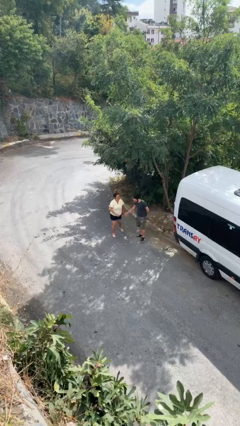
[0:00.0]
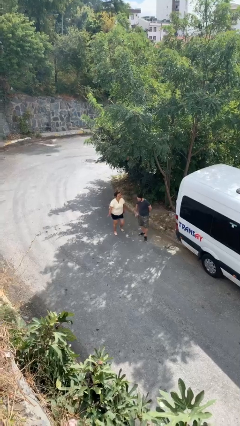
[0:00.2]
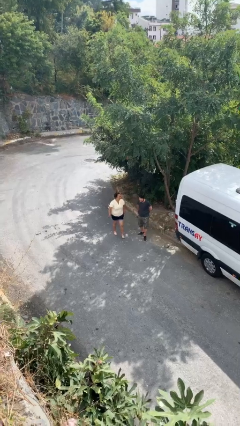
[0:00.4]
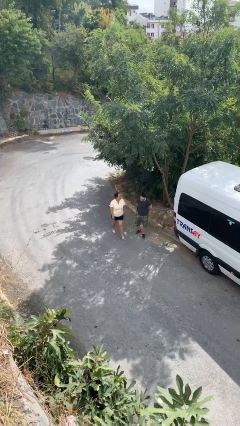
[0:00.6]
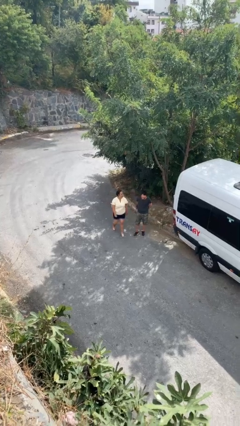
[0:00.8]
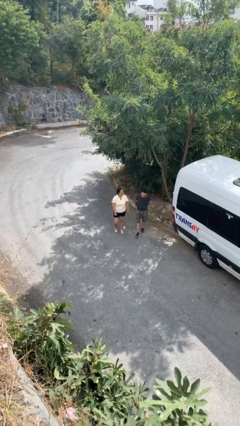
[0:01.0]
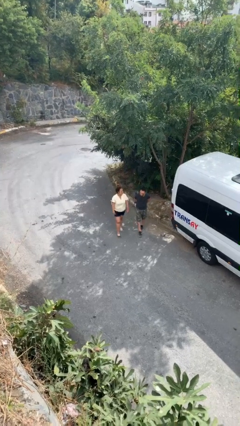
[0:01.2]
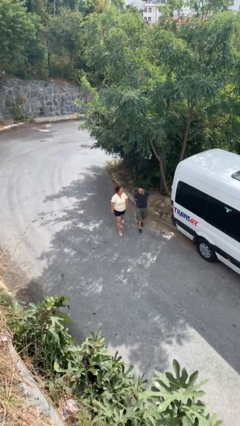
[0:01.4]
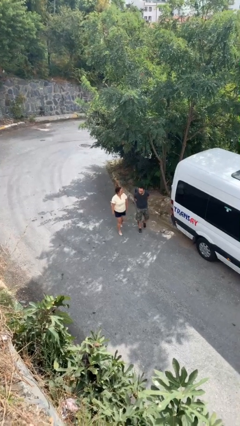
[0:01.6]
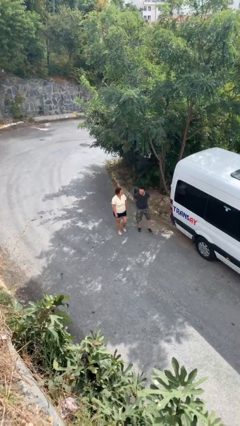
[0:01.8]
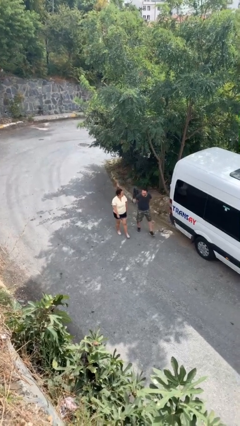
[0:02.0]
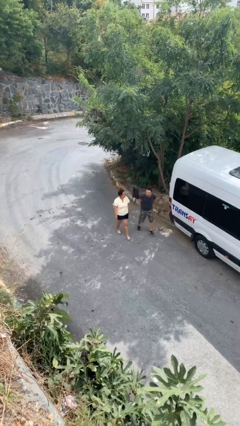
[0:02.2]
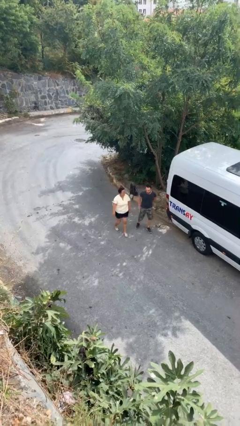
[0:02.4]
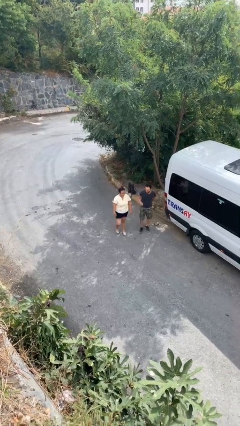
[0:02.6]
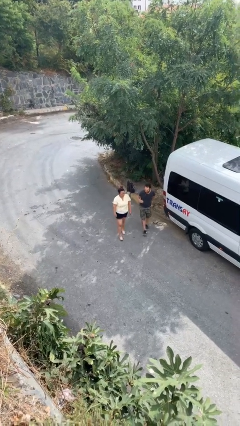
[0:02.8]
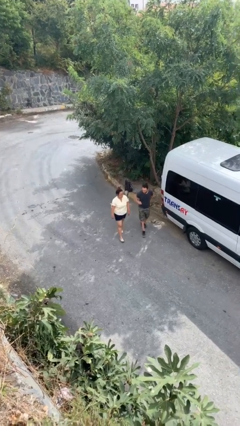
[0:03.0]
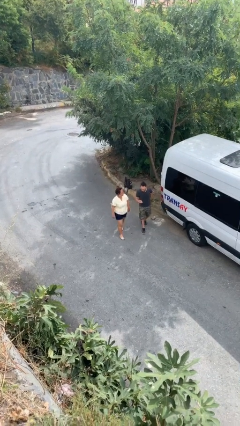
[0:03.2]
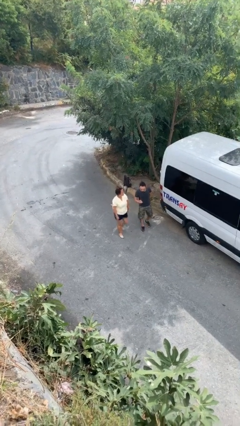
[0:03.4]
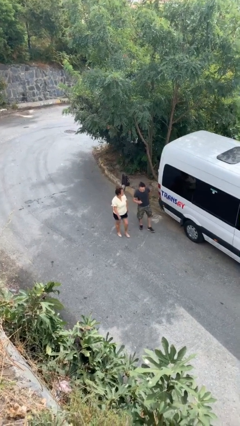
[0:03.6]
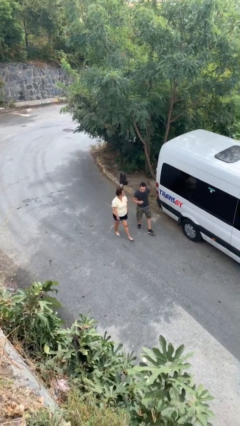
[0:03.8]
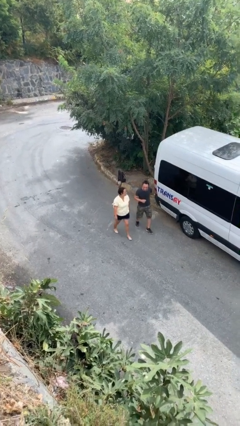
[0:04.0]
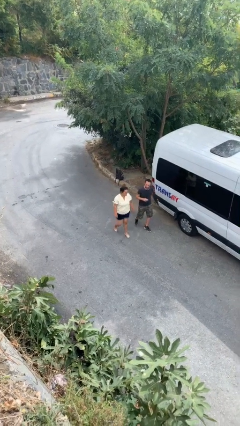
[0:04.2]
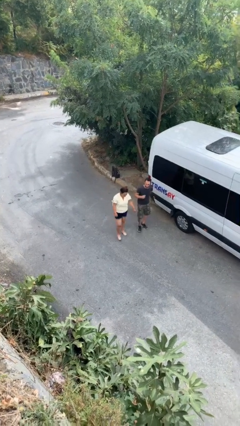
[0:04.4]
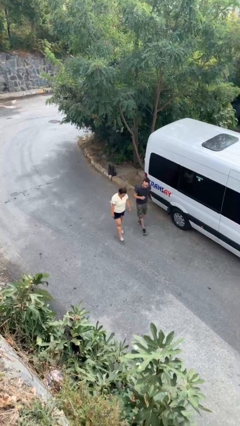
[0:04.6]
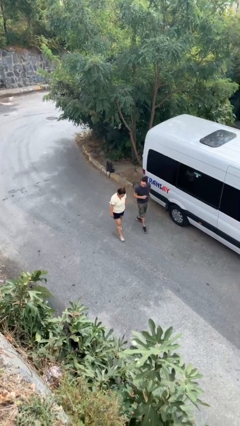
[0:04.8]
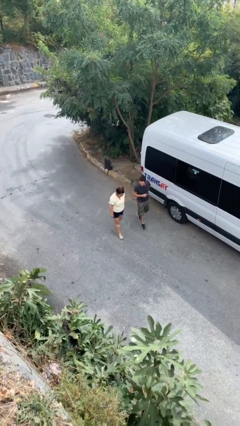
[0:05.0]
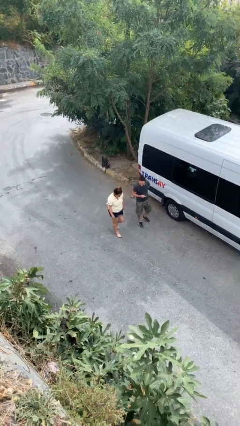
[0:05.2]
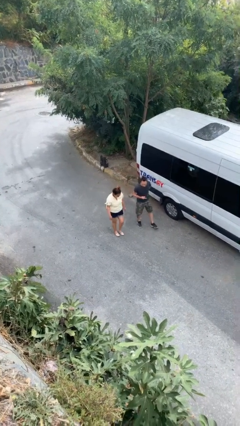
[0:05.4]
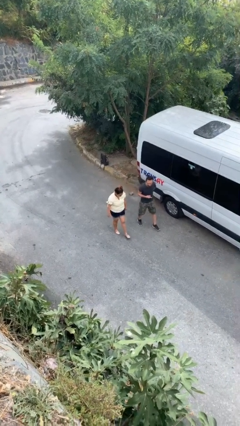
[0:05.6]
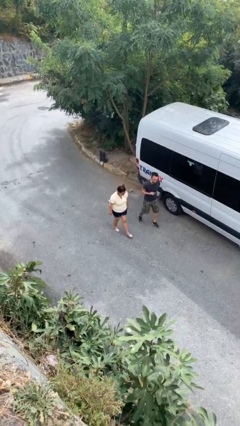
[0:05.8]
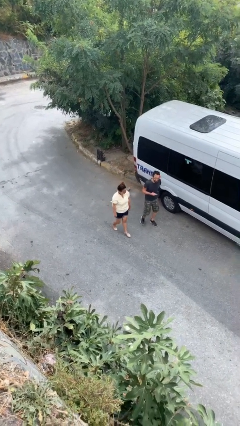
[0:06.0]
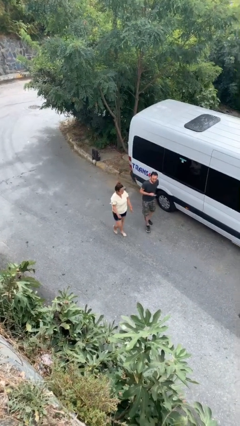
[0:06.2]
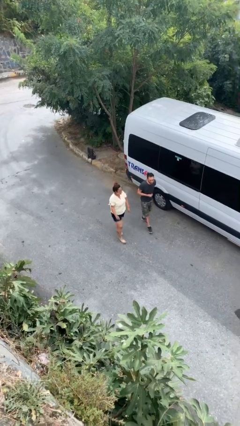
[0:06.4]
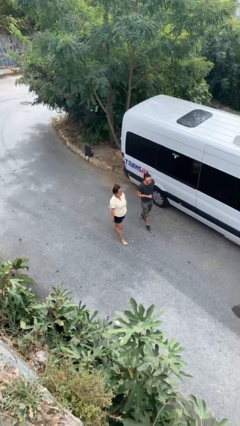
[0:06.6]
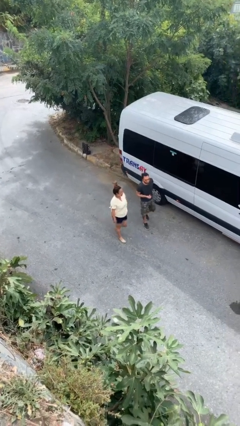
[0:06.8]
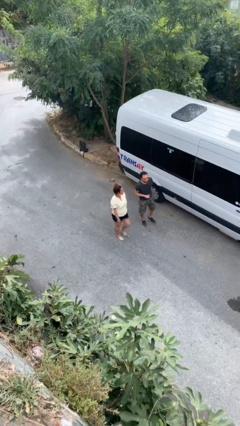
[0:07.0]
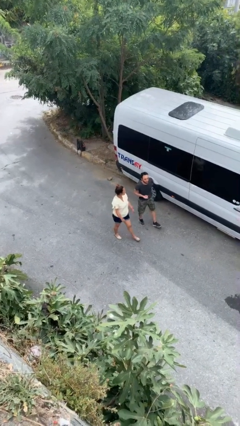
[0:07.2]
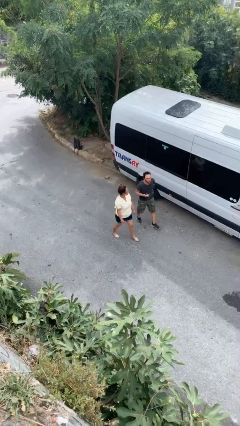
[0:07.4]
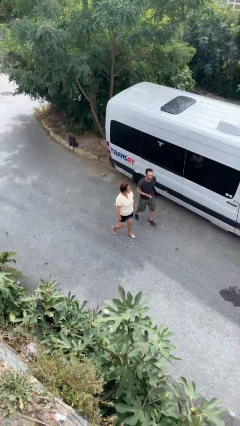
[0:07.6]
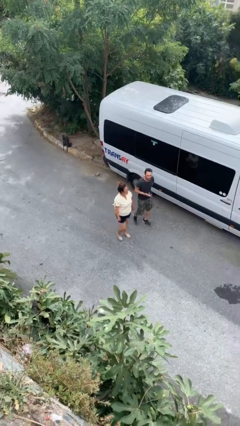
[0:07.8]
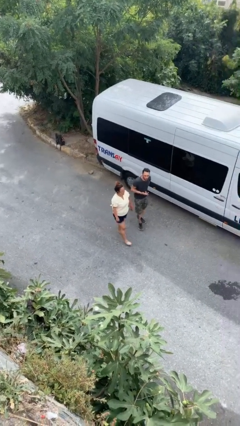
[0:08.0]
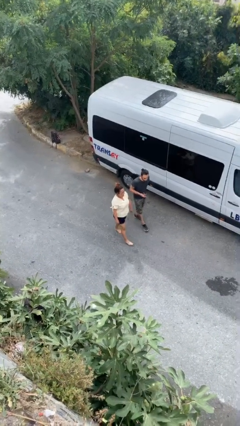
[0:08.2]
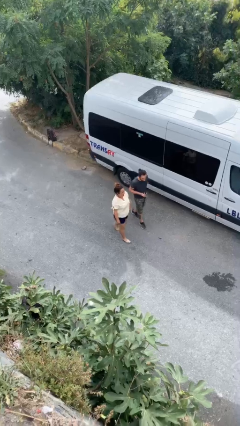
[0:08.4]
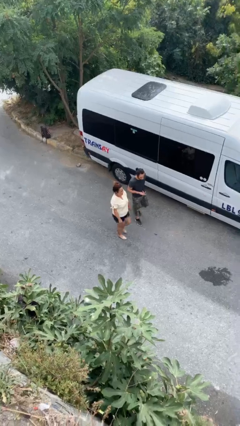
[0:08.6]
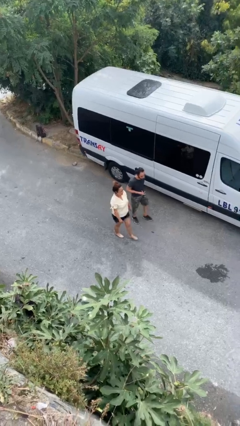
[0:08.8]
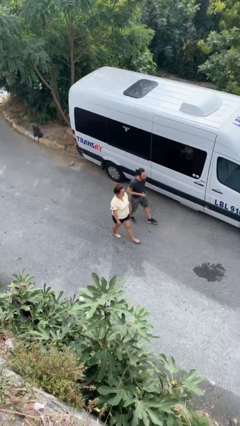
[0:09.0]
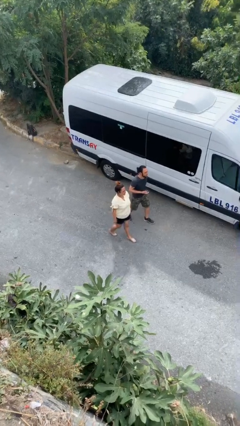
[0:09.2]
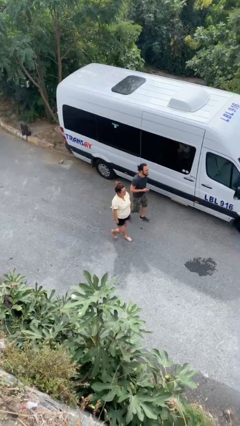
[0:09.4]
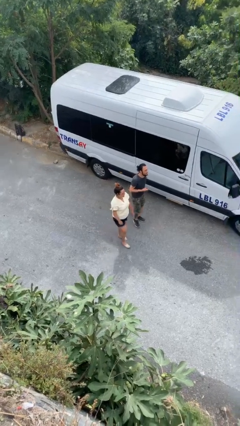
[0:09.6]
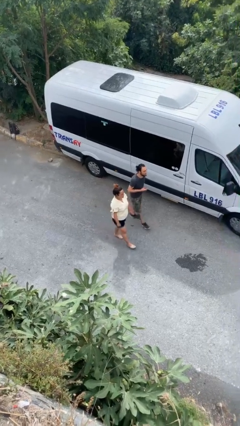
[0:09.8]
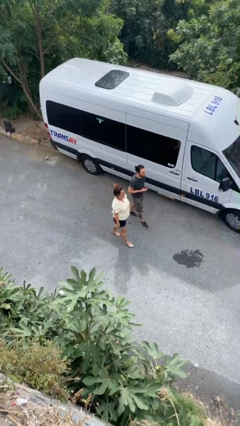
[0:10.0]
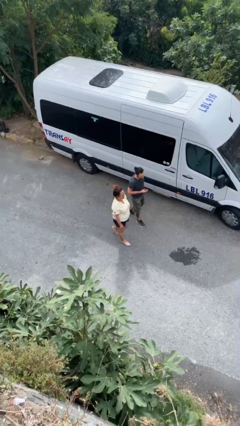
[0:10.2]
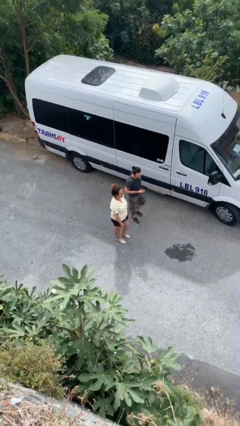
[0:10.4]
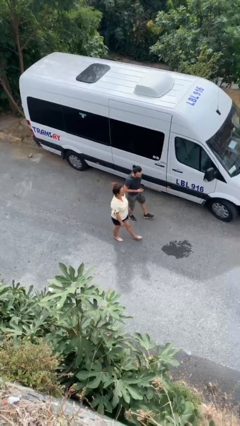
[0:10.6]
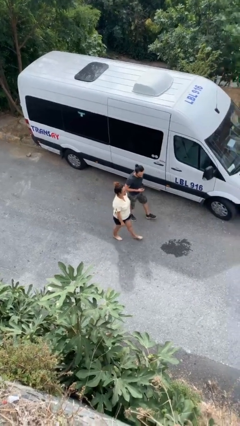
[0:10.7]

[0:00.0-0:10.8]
person talks to person

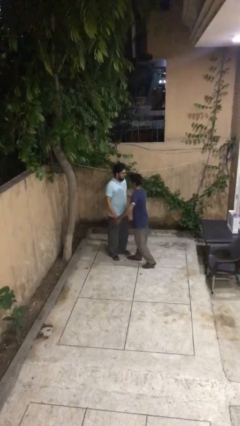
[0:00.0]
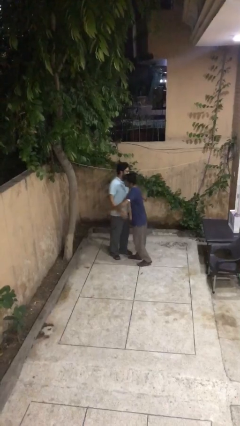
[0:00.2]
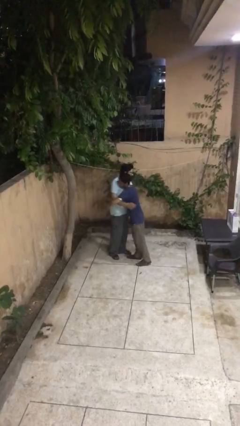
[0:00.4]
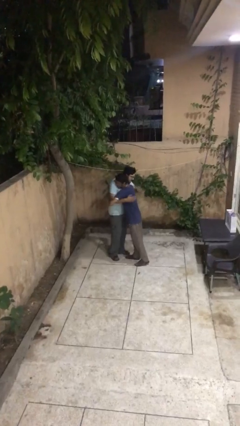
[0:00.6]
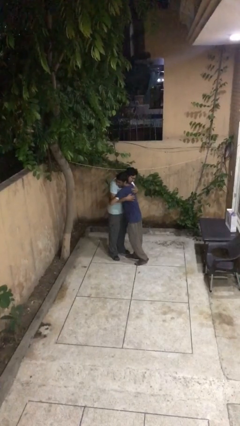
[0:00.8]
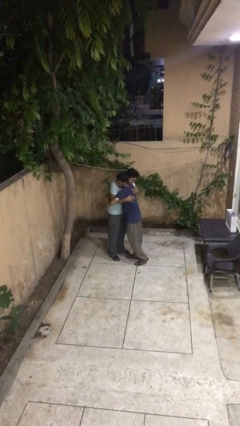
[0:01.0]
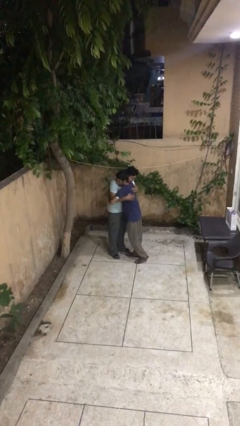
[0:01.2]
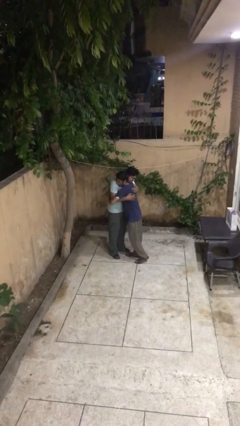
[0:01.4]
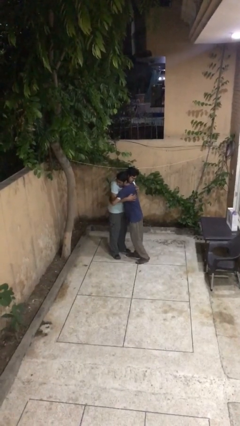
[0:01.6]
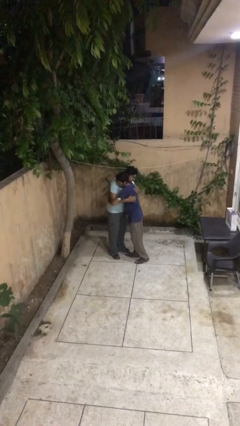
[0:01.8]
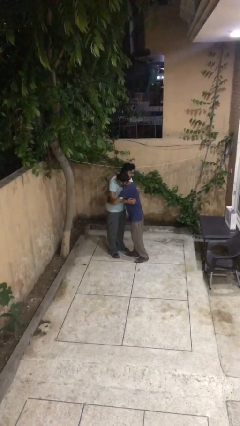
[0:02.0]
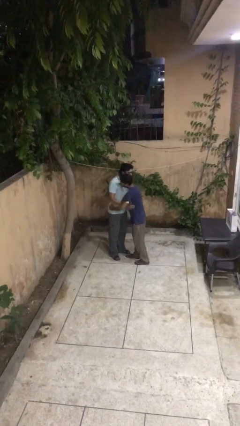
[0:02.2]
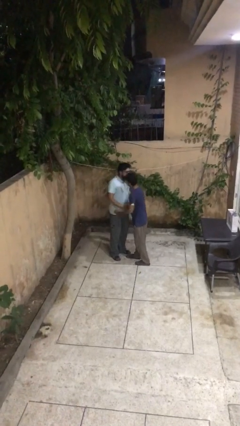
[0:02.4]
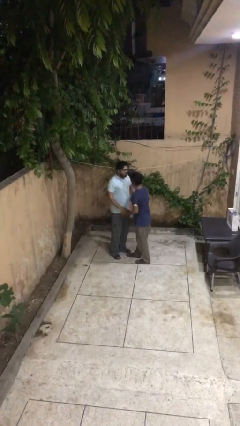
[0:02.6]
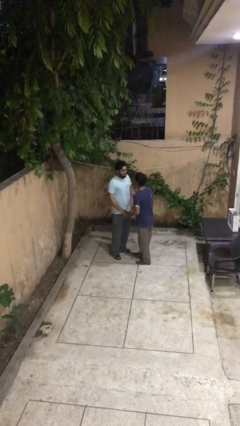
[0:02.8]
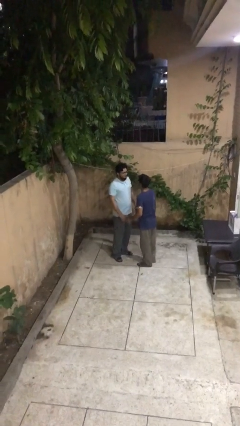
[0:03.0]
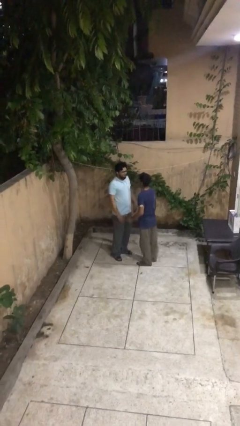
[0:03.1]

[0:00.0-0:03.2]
person embraces person

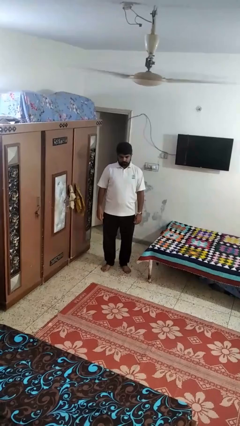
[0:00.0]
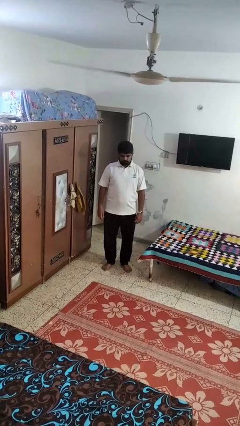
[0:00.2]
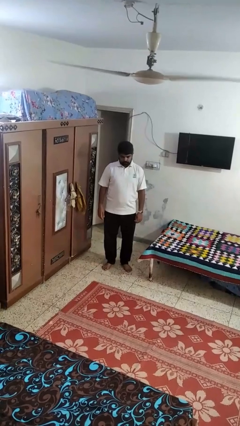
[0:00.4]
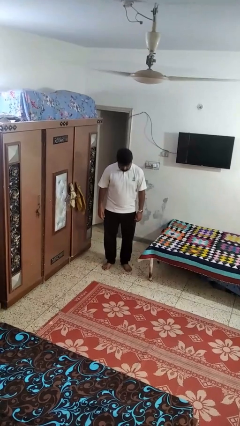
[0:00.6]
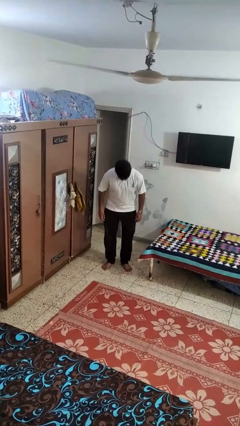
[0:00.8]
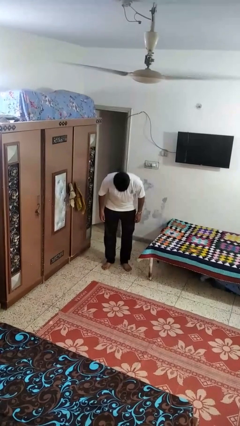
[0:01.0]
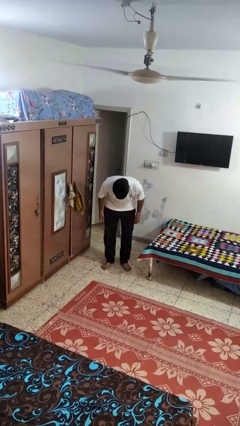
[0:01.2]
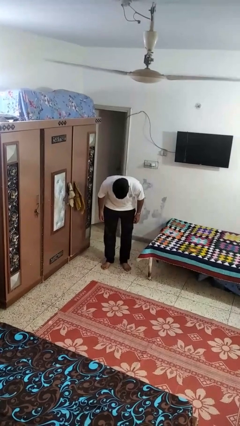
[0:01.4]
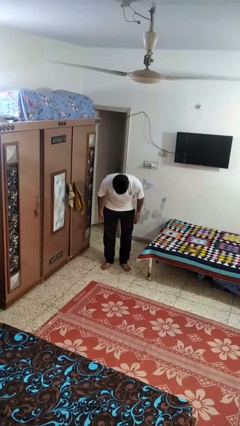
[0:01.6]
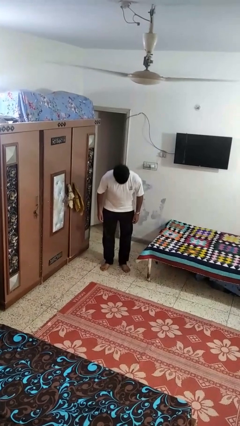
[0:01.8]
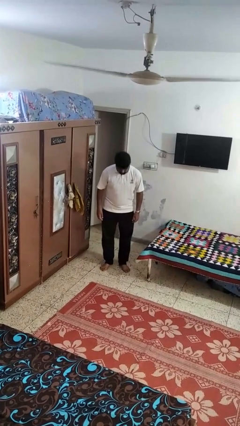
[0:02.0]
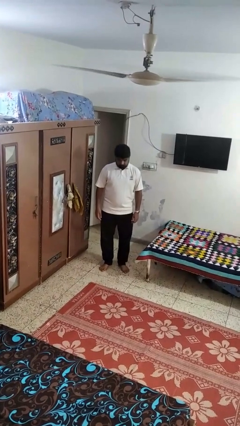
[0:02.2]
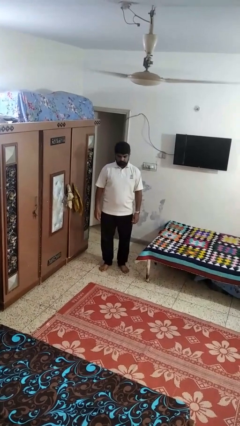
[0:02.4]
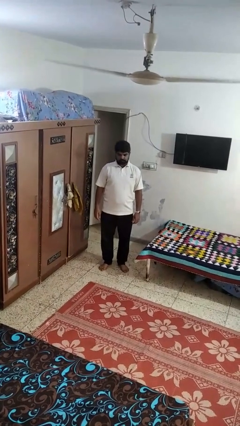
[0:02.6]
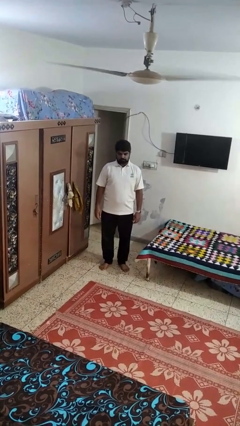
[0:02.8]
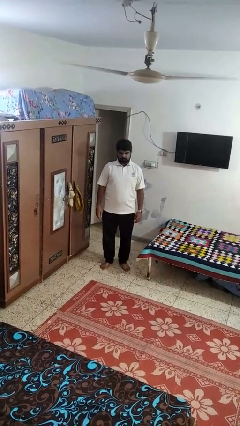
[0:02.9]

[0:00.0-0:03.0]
person bows

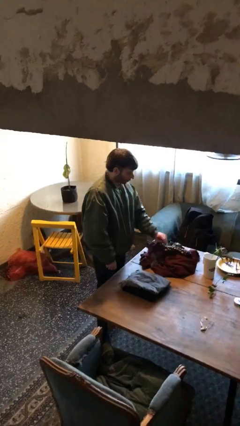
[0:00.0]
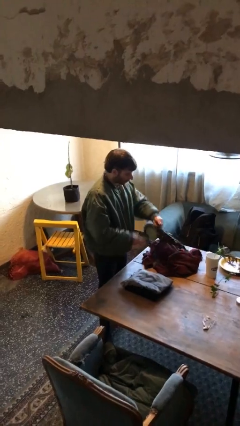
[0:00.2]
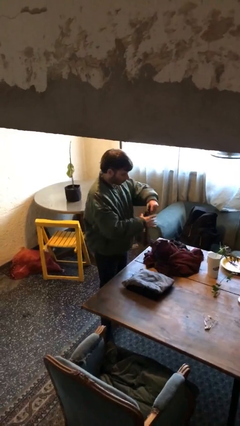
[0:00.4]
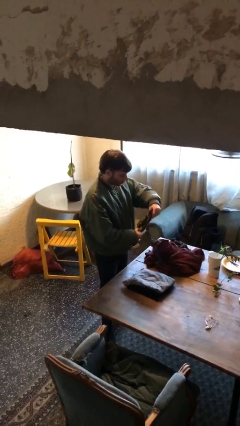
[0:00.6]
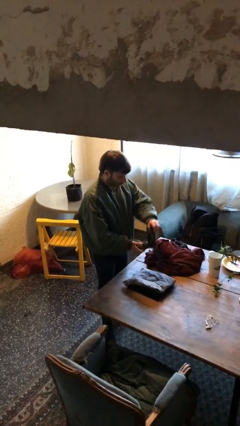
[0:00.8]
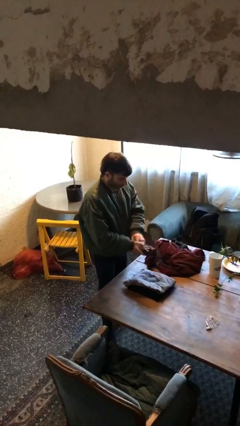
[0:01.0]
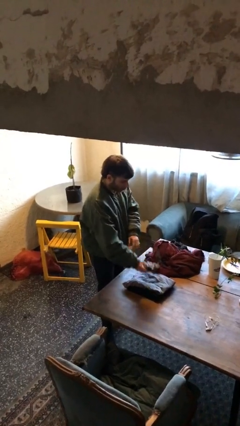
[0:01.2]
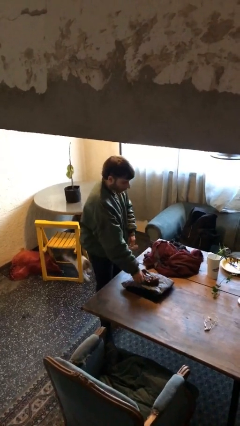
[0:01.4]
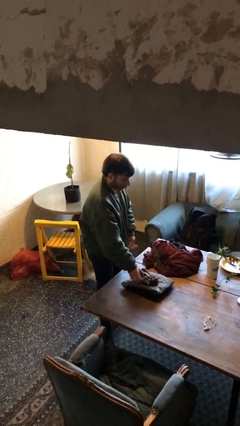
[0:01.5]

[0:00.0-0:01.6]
person folds socks
